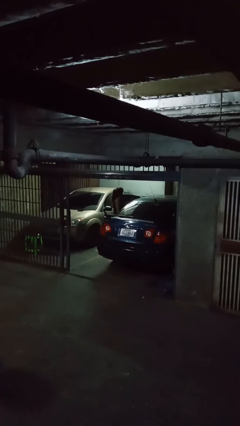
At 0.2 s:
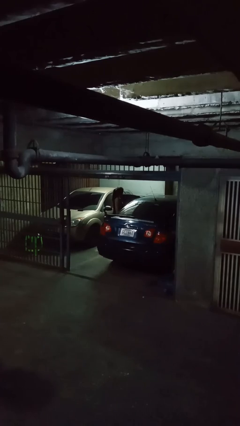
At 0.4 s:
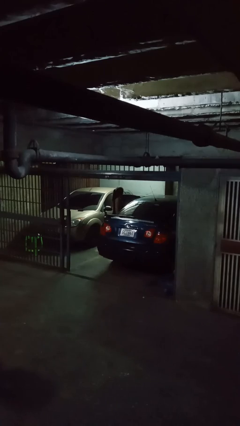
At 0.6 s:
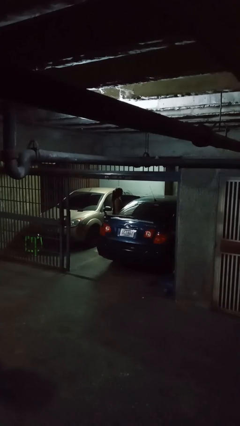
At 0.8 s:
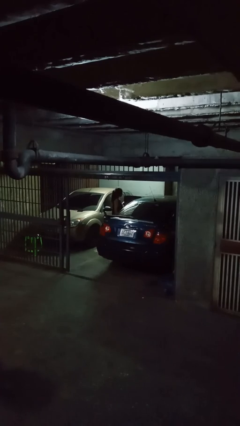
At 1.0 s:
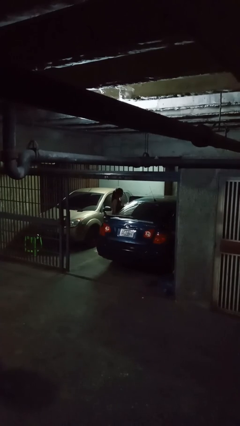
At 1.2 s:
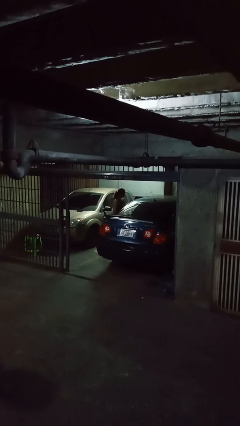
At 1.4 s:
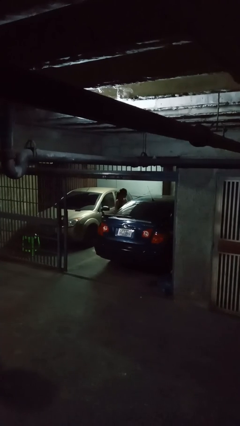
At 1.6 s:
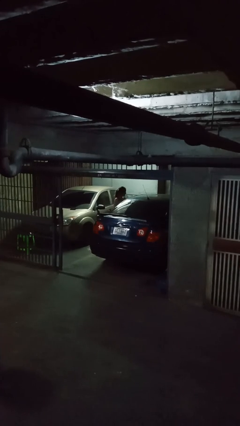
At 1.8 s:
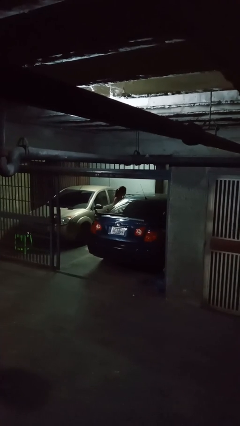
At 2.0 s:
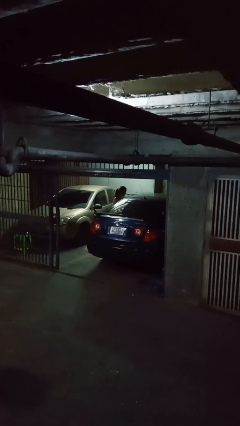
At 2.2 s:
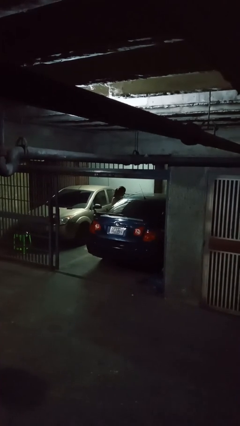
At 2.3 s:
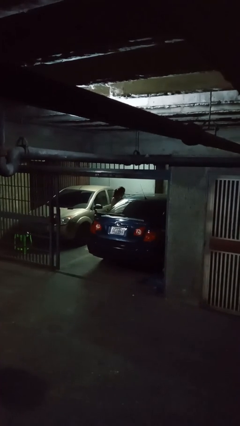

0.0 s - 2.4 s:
person closes car door

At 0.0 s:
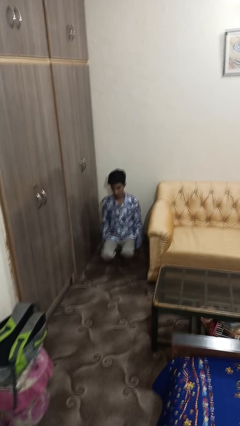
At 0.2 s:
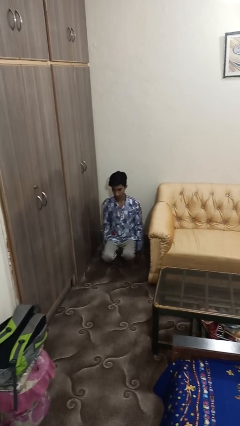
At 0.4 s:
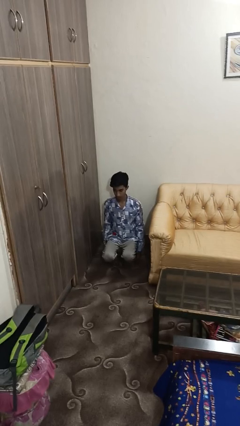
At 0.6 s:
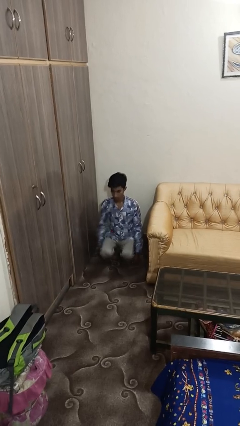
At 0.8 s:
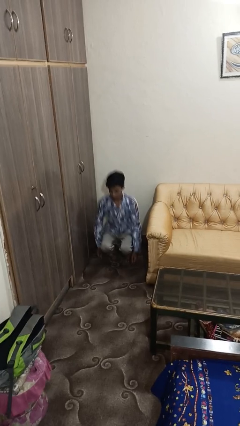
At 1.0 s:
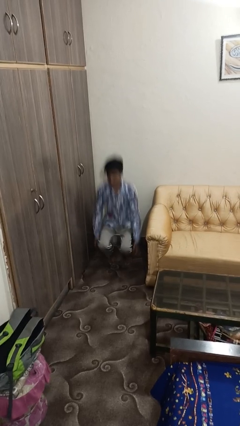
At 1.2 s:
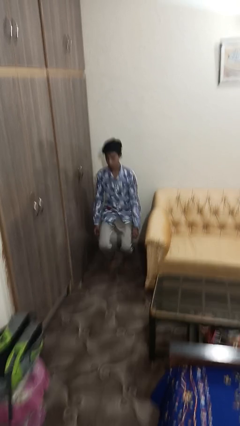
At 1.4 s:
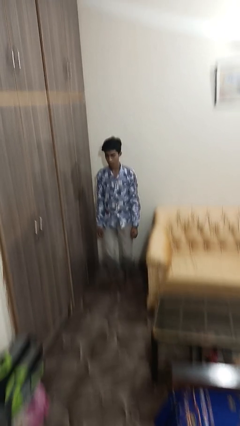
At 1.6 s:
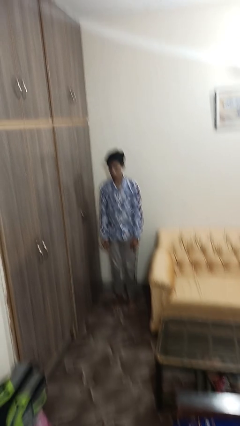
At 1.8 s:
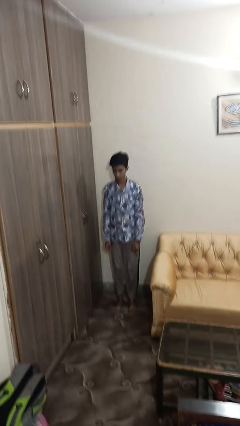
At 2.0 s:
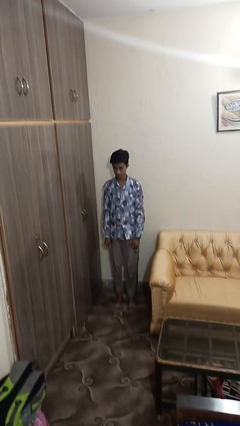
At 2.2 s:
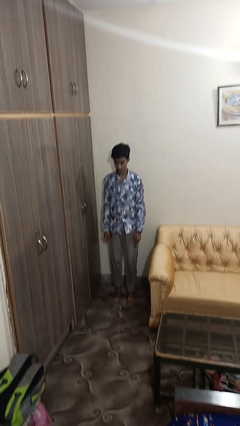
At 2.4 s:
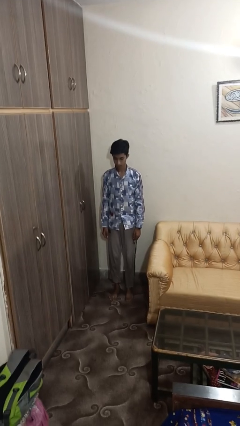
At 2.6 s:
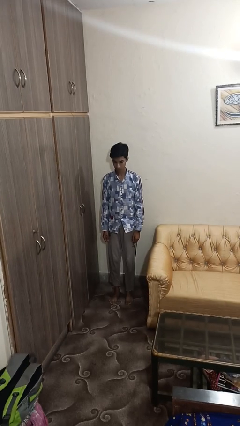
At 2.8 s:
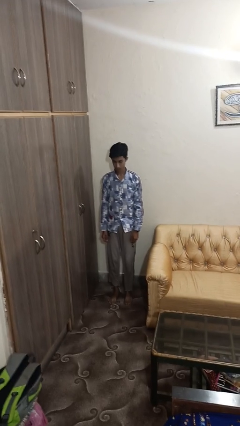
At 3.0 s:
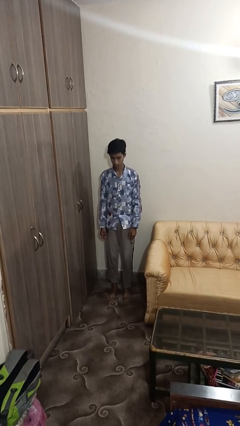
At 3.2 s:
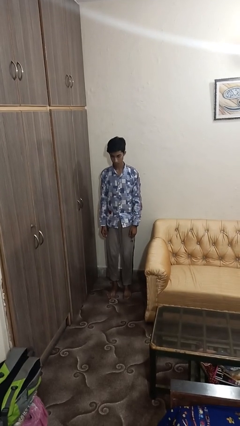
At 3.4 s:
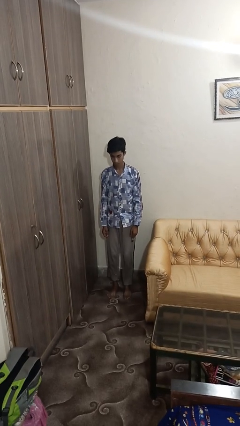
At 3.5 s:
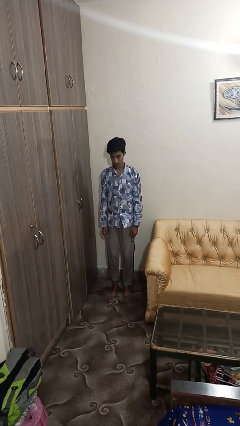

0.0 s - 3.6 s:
person stands up

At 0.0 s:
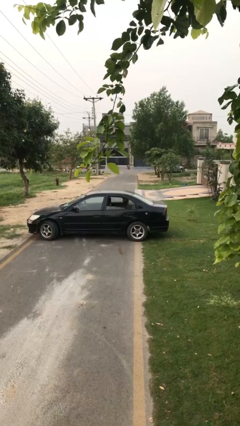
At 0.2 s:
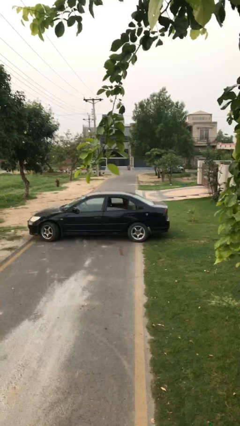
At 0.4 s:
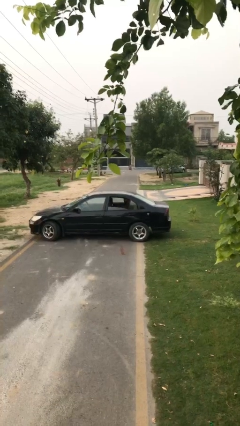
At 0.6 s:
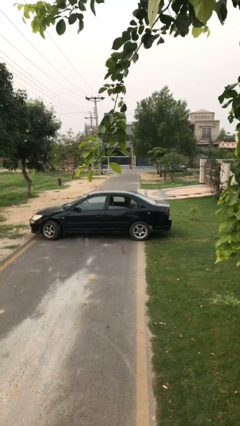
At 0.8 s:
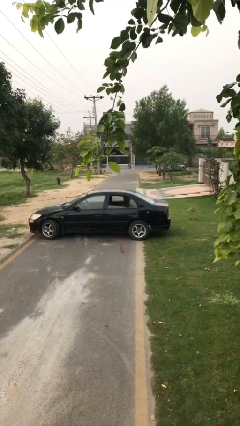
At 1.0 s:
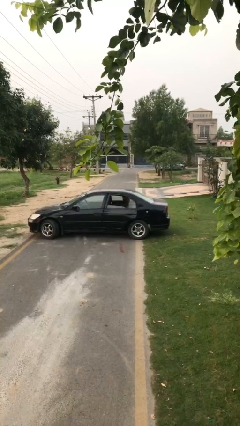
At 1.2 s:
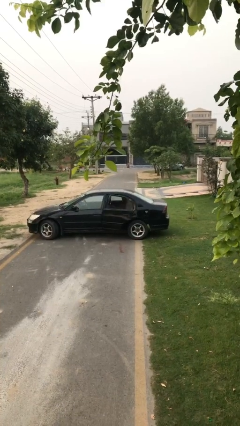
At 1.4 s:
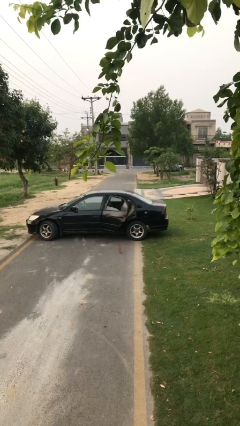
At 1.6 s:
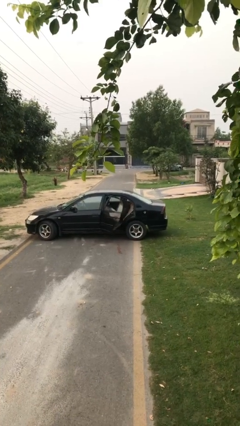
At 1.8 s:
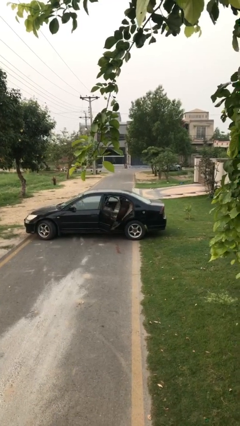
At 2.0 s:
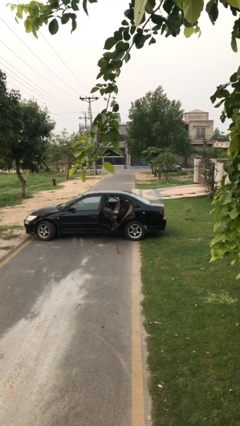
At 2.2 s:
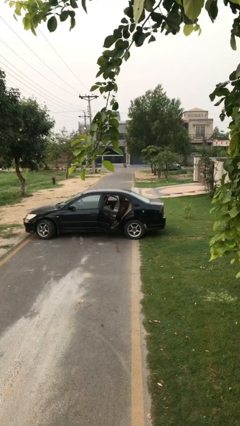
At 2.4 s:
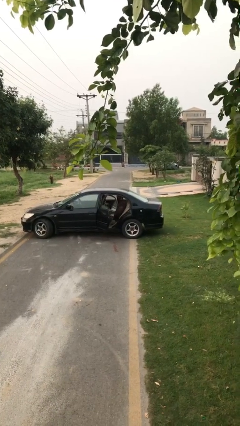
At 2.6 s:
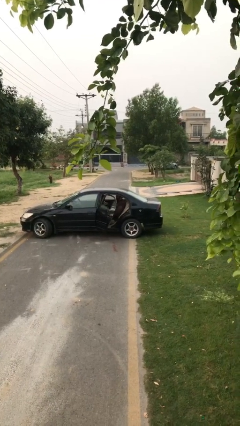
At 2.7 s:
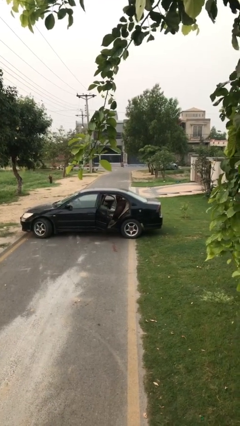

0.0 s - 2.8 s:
person opens car door

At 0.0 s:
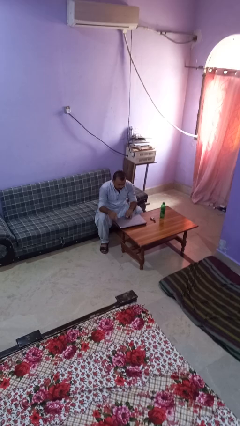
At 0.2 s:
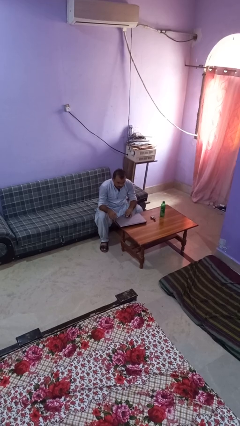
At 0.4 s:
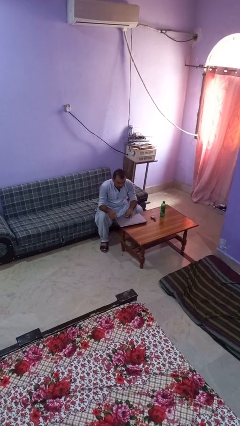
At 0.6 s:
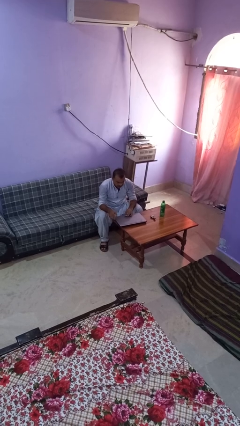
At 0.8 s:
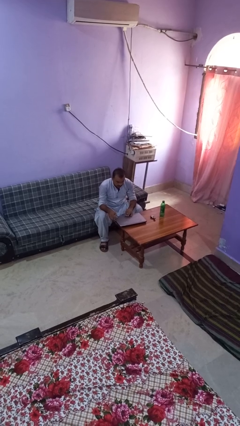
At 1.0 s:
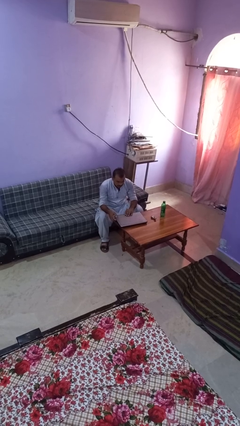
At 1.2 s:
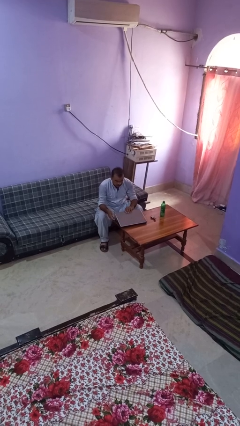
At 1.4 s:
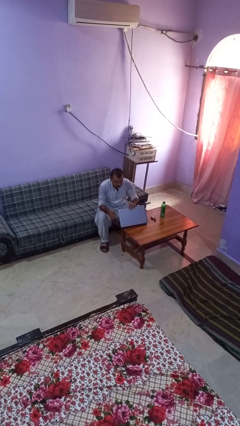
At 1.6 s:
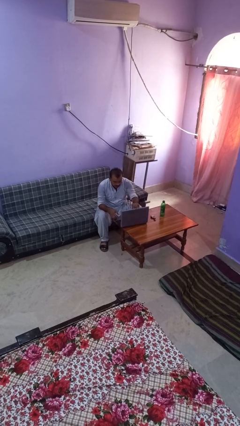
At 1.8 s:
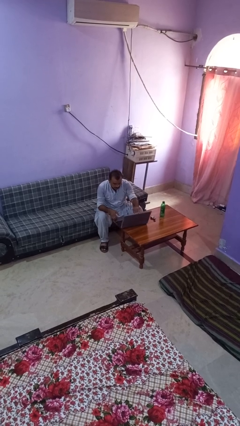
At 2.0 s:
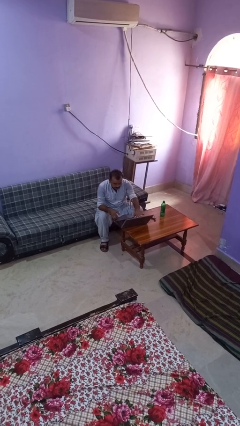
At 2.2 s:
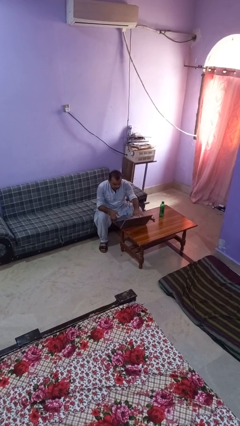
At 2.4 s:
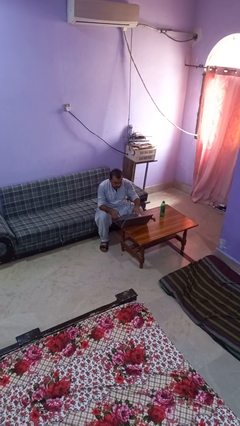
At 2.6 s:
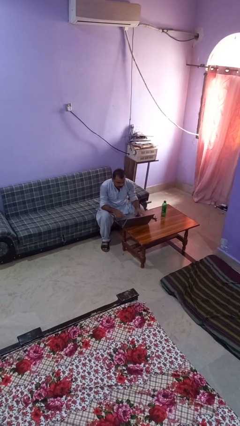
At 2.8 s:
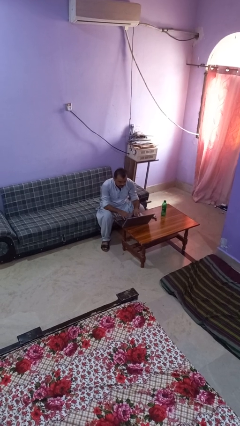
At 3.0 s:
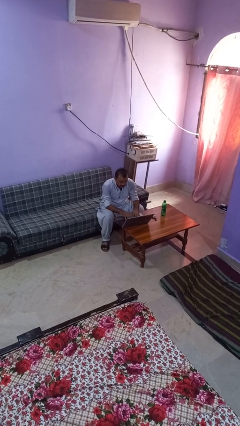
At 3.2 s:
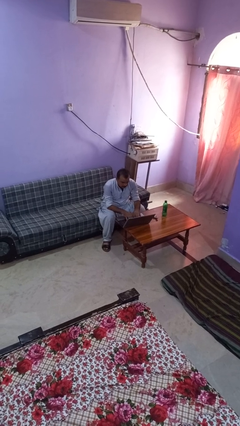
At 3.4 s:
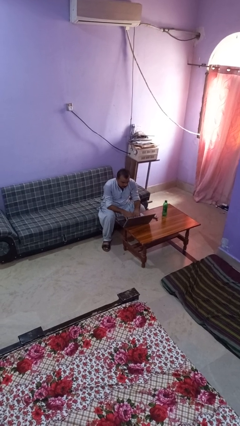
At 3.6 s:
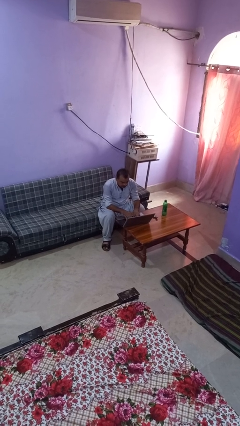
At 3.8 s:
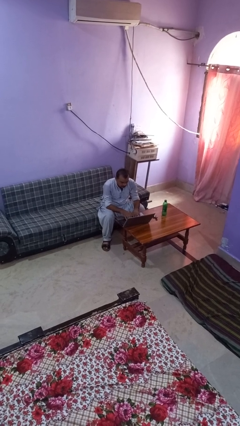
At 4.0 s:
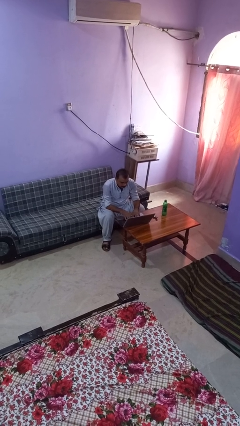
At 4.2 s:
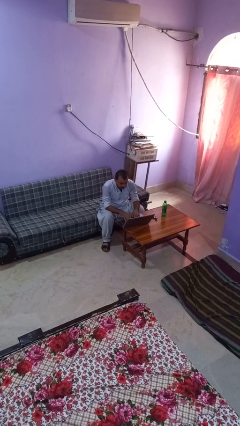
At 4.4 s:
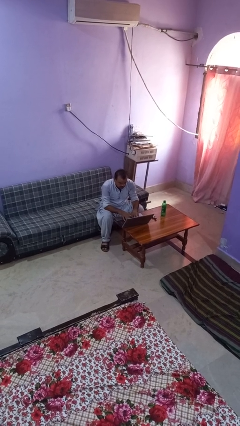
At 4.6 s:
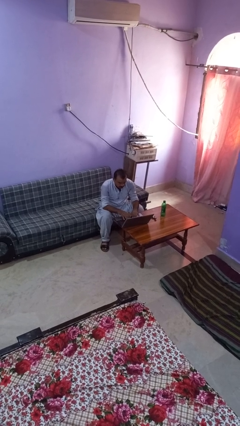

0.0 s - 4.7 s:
person opens laptop

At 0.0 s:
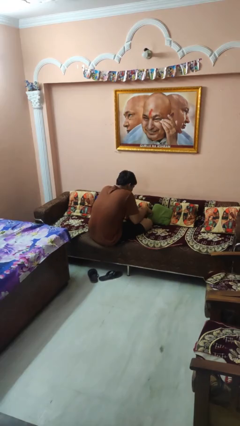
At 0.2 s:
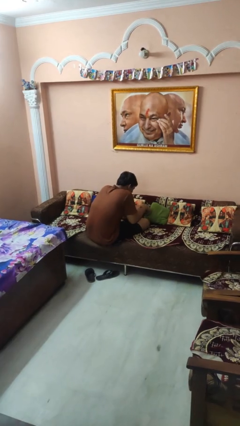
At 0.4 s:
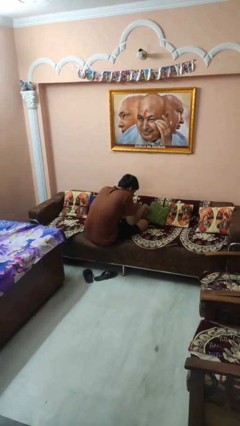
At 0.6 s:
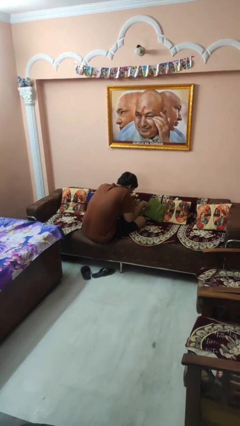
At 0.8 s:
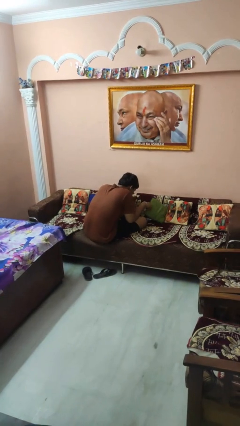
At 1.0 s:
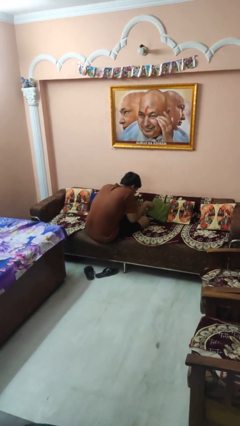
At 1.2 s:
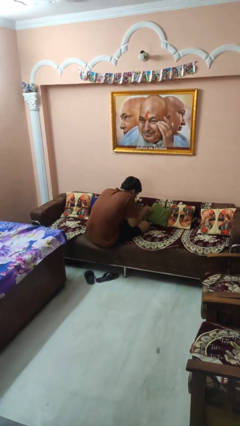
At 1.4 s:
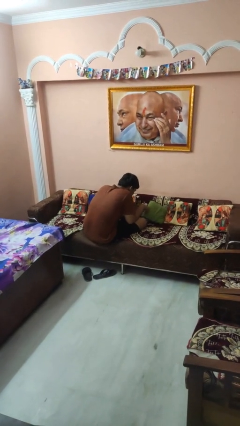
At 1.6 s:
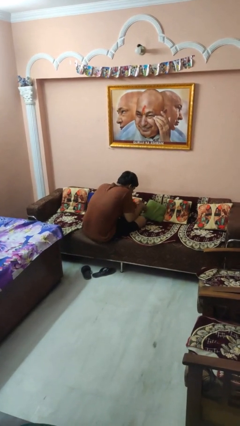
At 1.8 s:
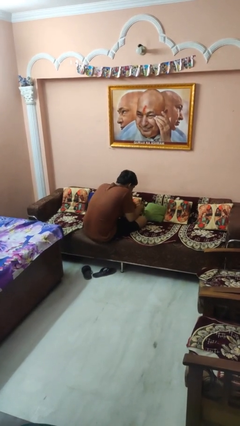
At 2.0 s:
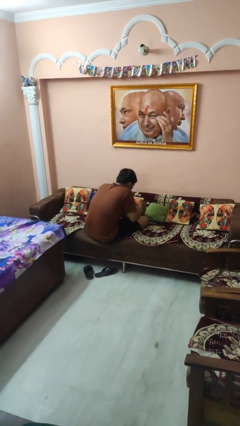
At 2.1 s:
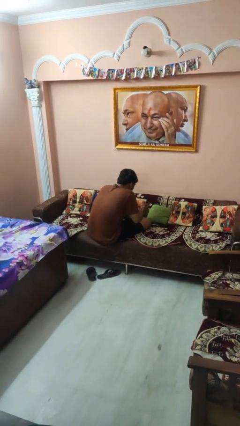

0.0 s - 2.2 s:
person searches in couch

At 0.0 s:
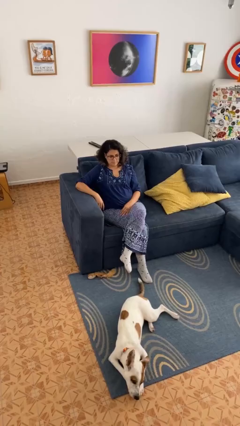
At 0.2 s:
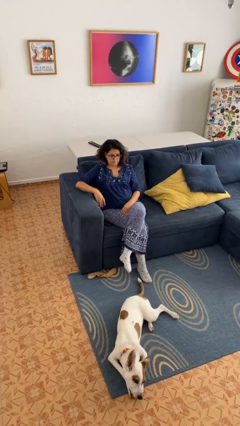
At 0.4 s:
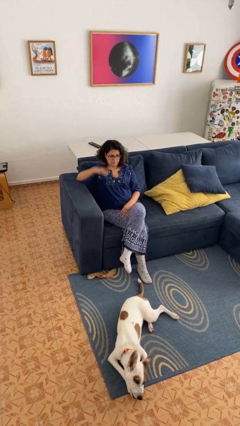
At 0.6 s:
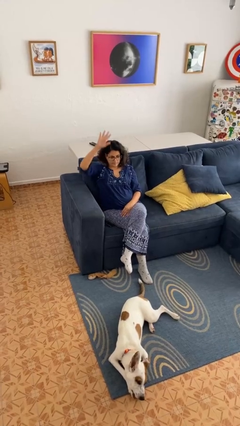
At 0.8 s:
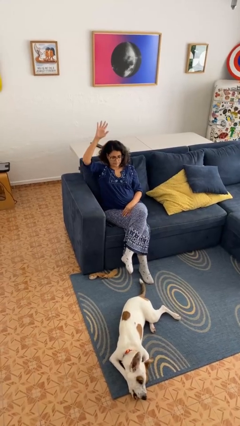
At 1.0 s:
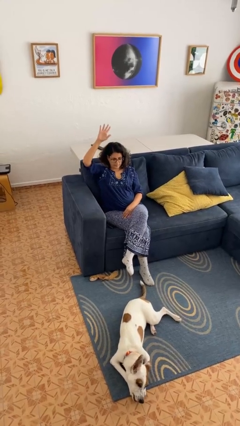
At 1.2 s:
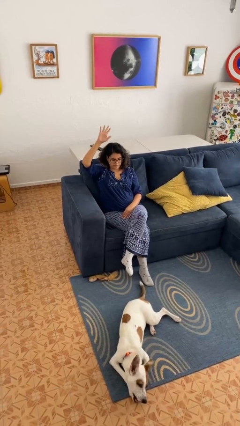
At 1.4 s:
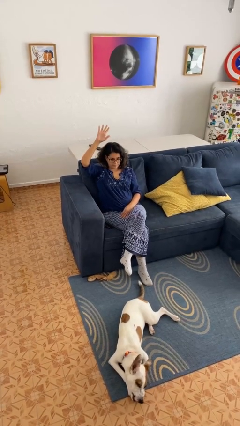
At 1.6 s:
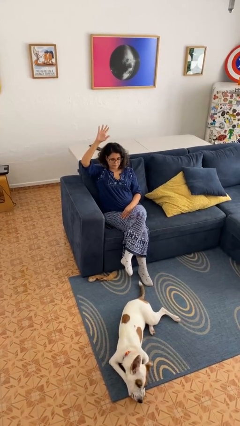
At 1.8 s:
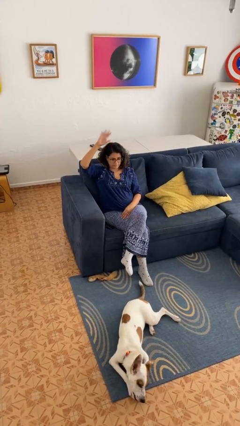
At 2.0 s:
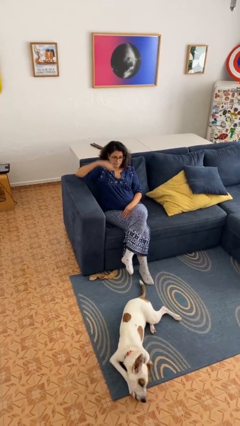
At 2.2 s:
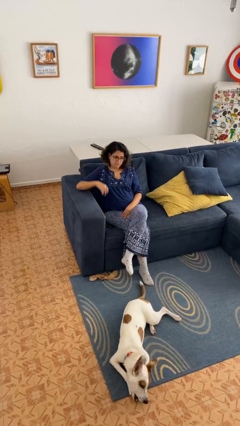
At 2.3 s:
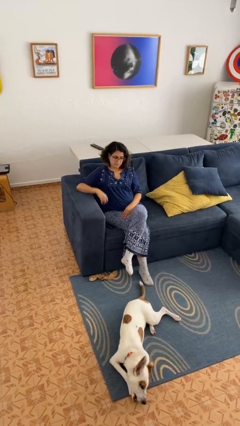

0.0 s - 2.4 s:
person gestures number five
